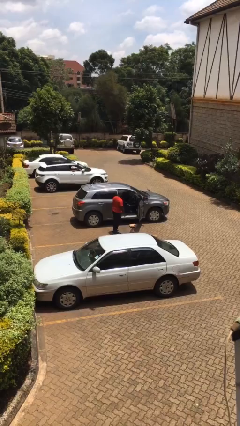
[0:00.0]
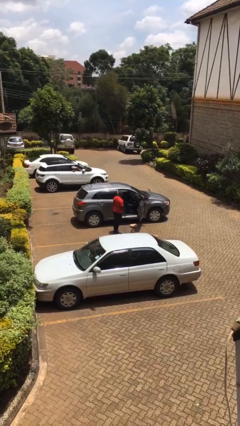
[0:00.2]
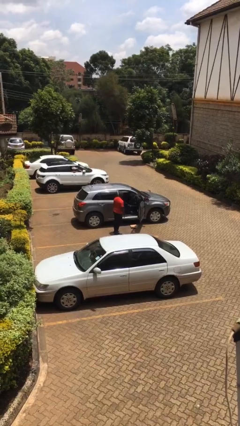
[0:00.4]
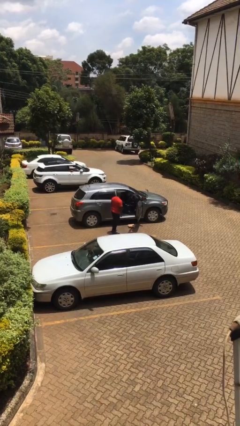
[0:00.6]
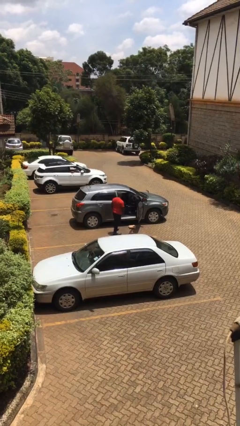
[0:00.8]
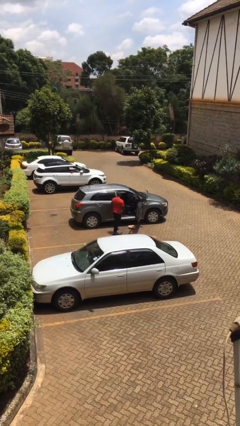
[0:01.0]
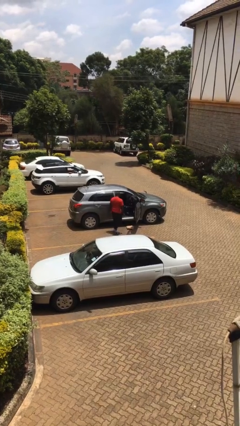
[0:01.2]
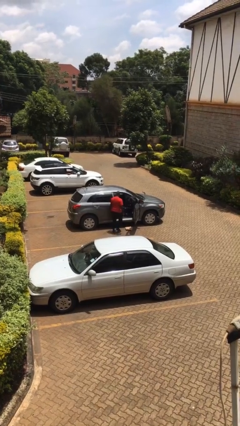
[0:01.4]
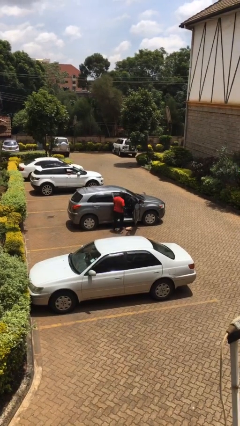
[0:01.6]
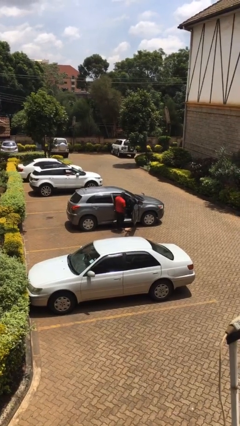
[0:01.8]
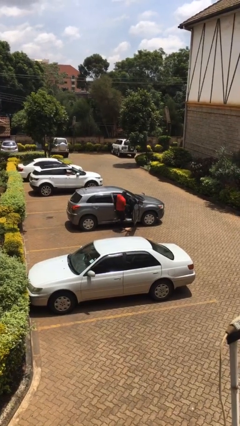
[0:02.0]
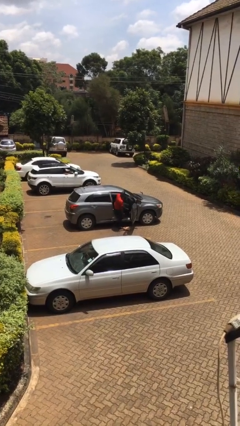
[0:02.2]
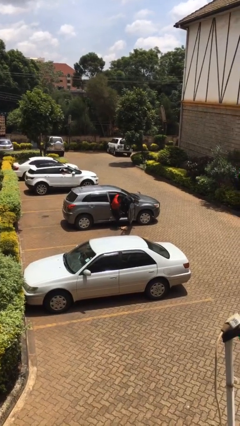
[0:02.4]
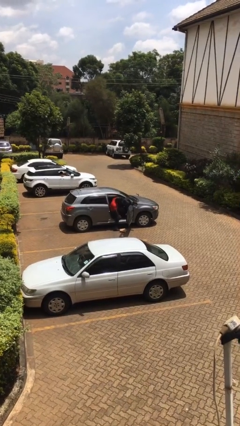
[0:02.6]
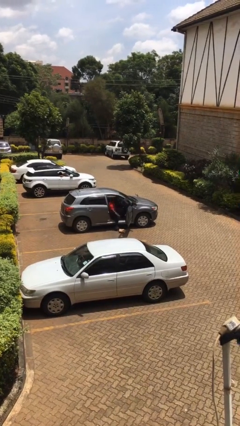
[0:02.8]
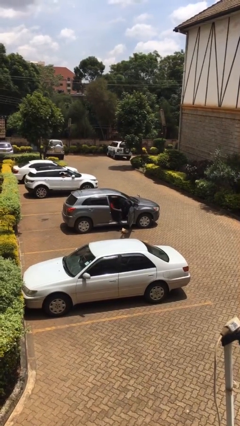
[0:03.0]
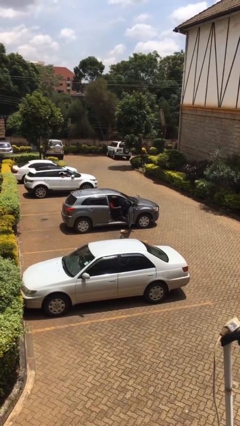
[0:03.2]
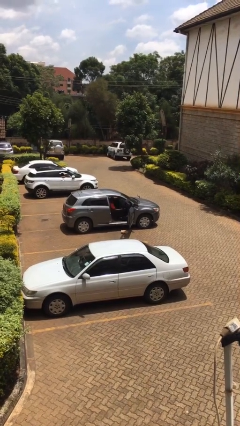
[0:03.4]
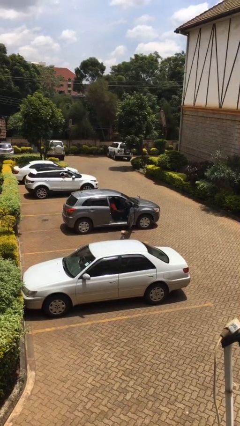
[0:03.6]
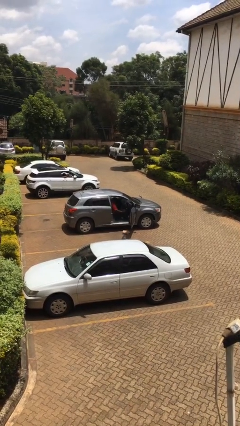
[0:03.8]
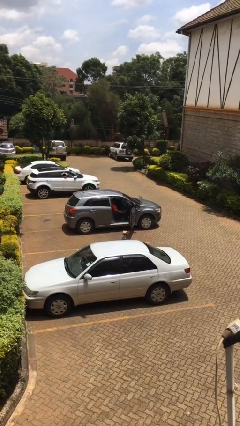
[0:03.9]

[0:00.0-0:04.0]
person enters car

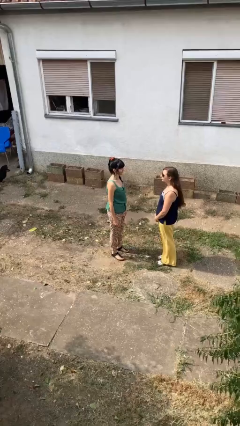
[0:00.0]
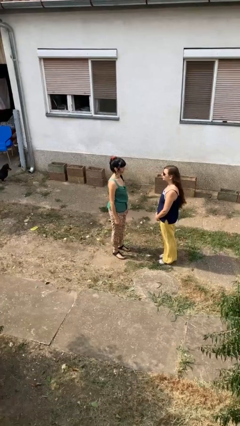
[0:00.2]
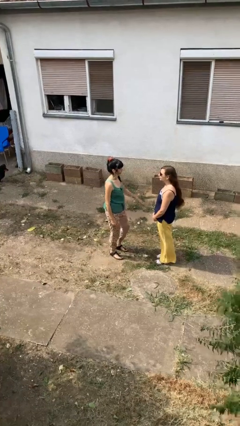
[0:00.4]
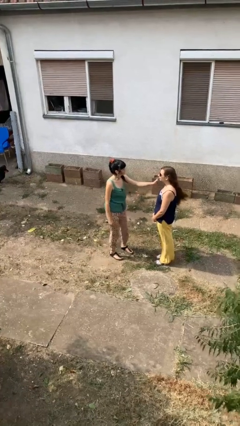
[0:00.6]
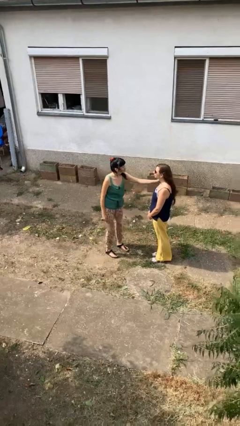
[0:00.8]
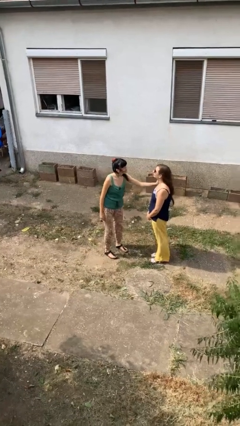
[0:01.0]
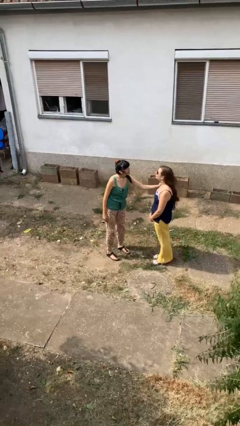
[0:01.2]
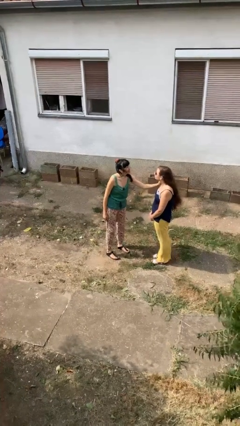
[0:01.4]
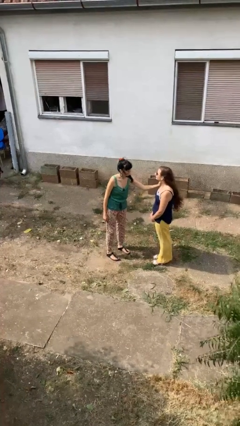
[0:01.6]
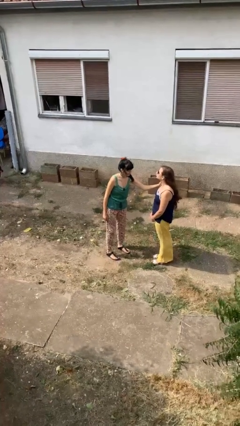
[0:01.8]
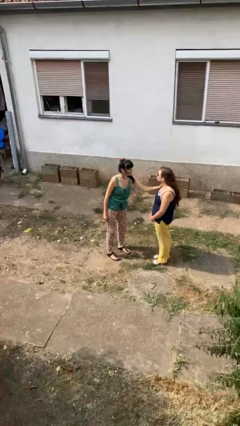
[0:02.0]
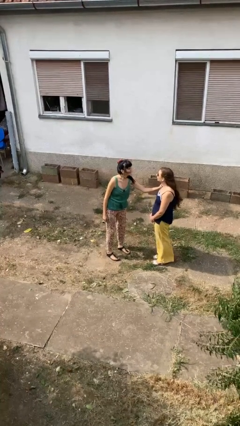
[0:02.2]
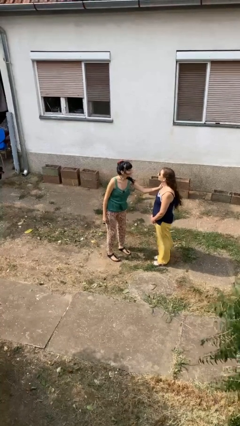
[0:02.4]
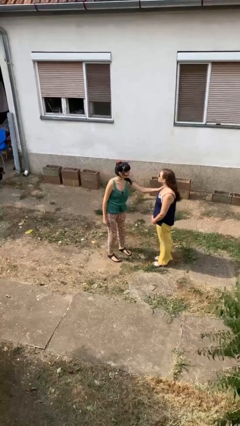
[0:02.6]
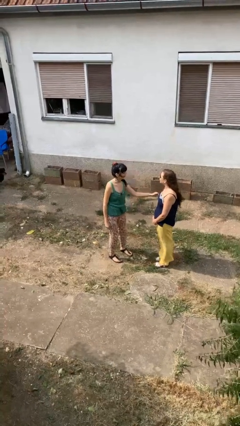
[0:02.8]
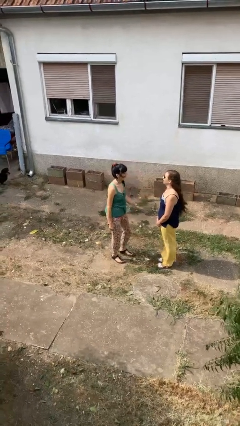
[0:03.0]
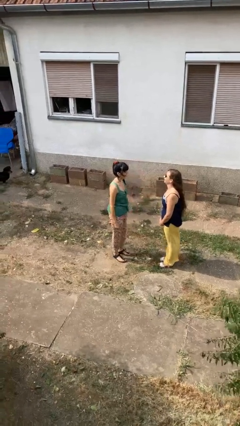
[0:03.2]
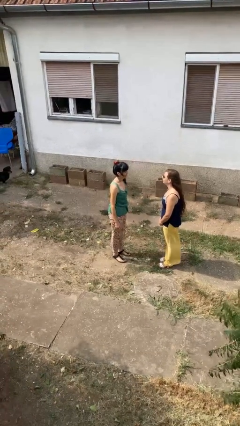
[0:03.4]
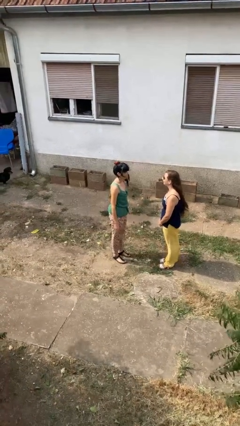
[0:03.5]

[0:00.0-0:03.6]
person pounds shoulders of person

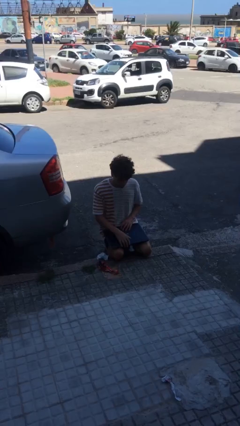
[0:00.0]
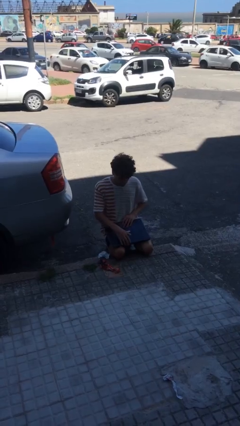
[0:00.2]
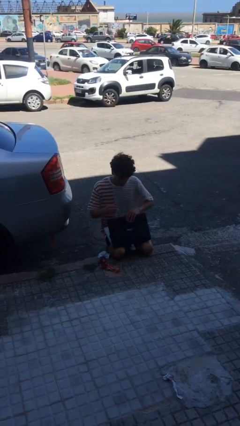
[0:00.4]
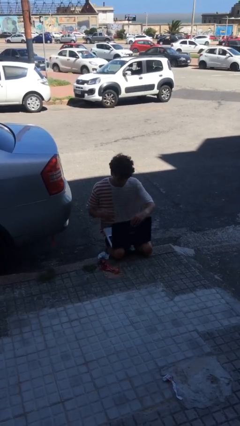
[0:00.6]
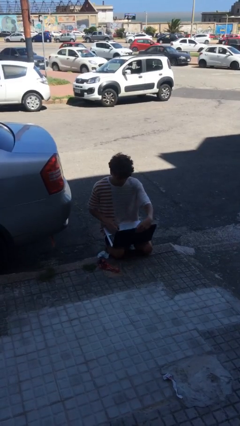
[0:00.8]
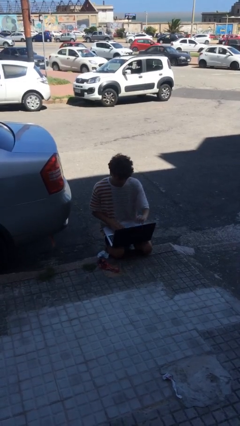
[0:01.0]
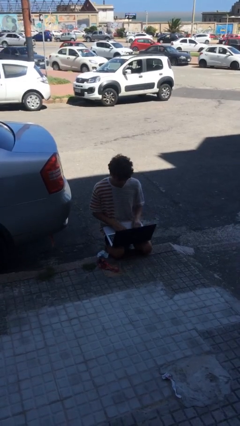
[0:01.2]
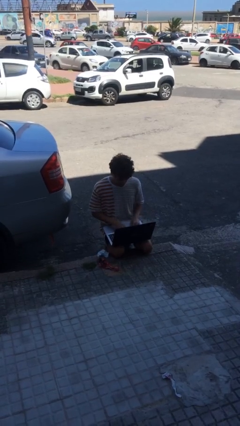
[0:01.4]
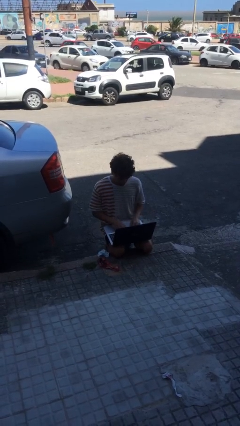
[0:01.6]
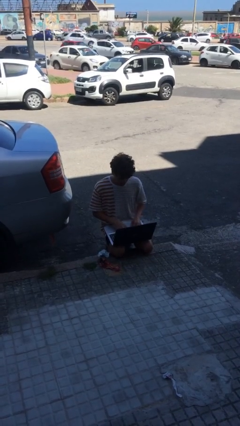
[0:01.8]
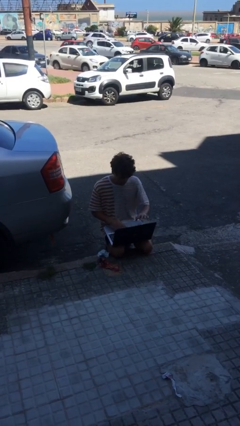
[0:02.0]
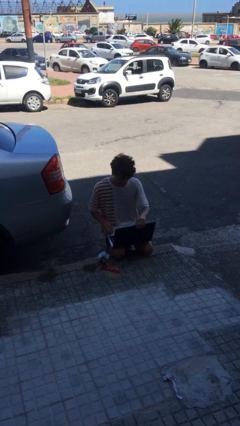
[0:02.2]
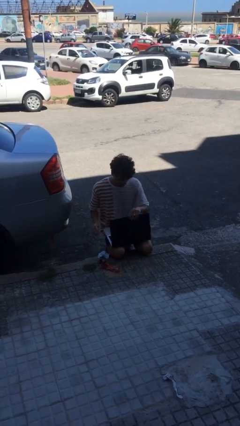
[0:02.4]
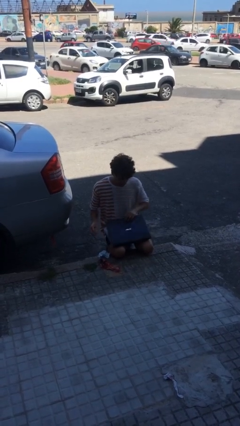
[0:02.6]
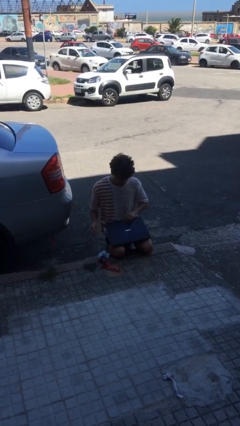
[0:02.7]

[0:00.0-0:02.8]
person interacts with laptop

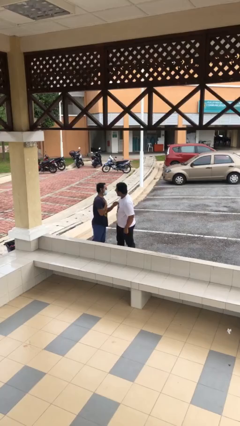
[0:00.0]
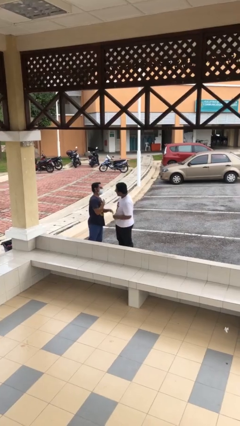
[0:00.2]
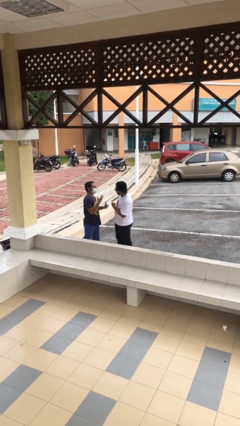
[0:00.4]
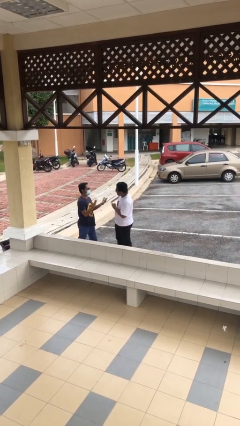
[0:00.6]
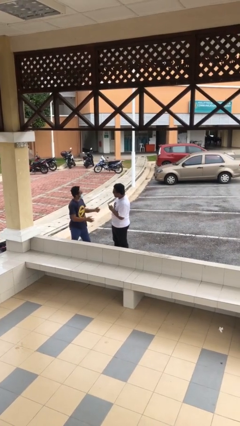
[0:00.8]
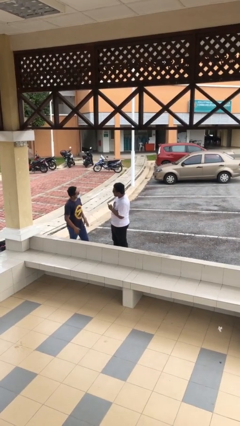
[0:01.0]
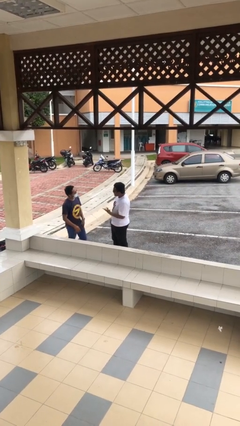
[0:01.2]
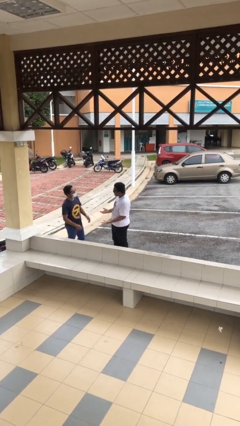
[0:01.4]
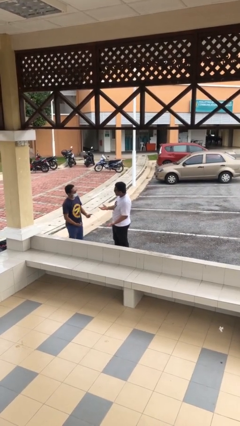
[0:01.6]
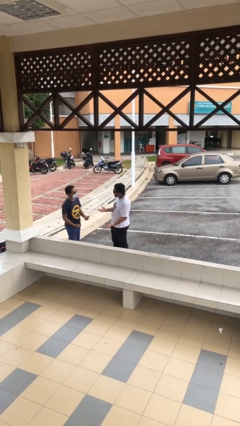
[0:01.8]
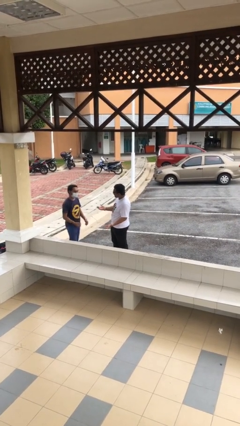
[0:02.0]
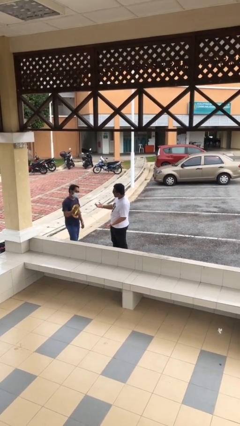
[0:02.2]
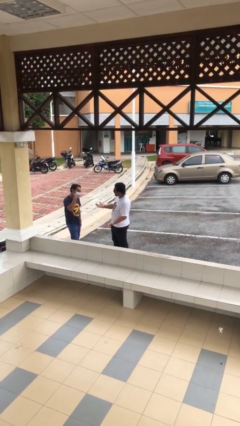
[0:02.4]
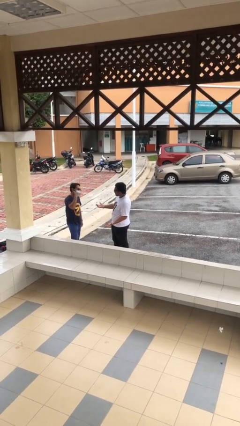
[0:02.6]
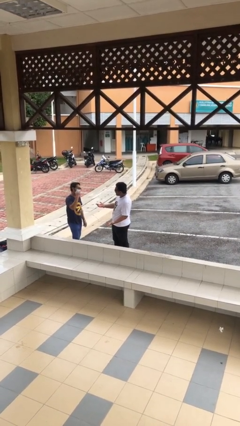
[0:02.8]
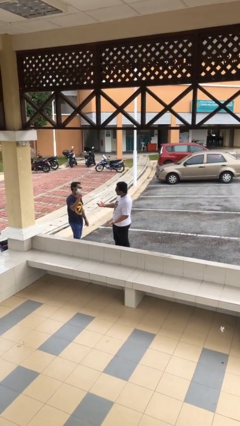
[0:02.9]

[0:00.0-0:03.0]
person talks to person

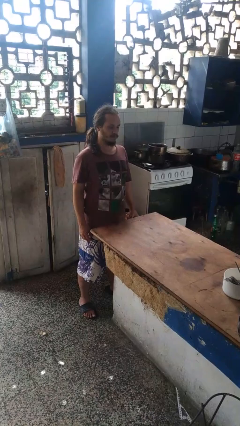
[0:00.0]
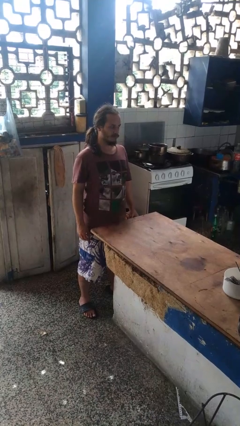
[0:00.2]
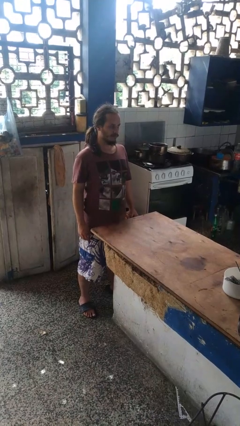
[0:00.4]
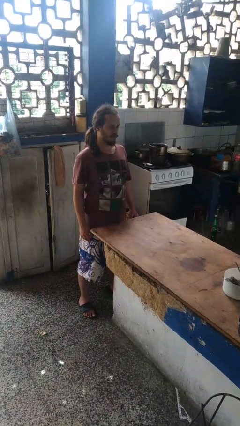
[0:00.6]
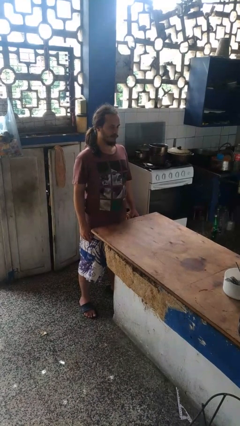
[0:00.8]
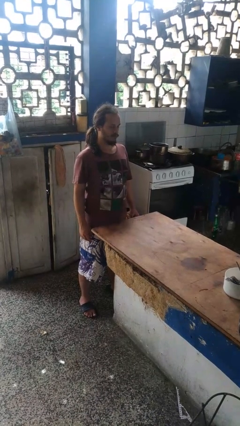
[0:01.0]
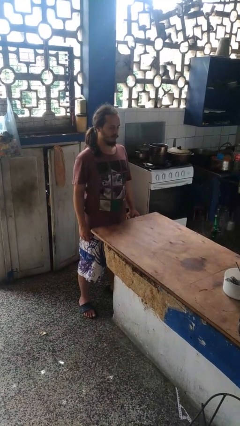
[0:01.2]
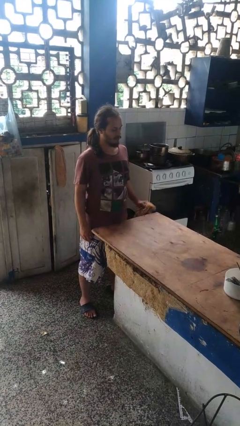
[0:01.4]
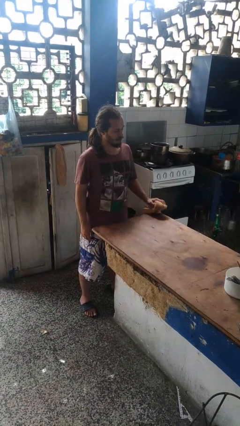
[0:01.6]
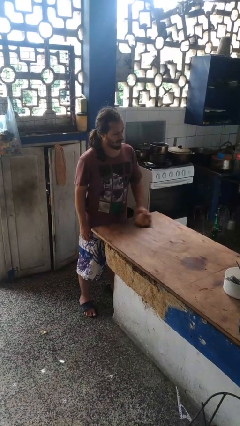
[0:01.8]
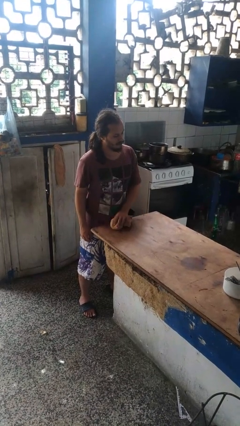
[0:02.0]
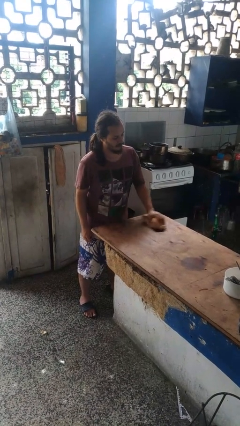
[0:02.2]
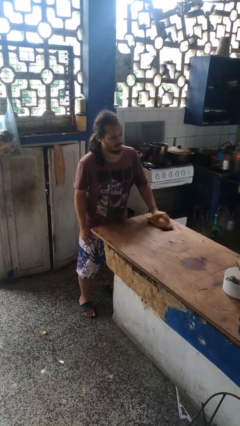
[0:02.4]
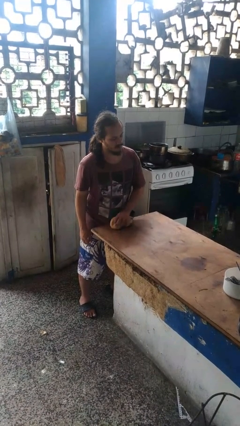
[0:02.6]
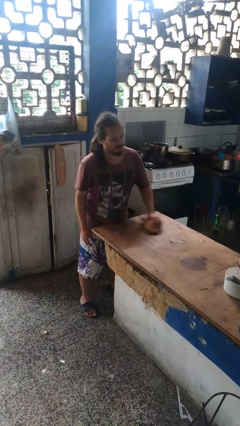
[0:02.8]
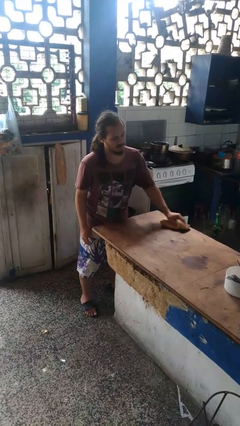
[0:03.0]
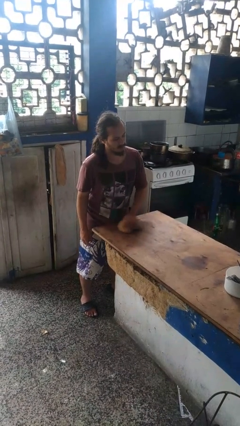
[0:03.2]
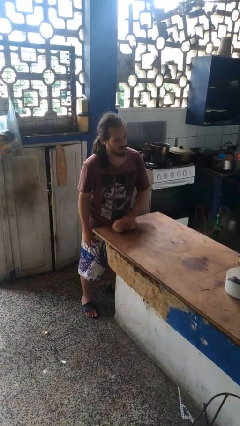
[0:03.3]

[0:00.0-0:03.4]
person cleans table with rag

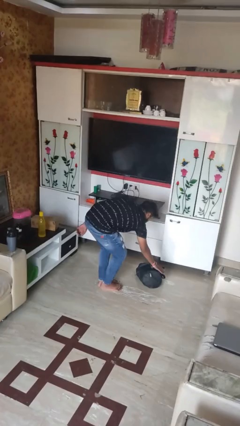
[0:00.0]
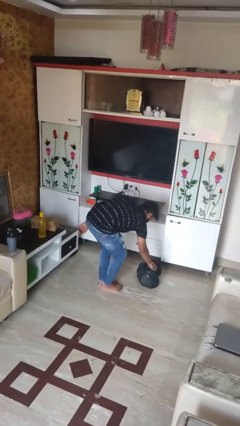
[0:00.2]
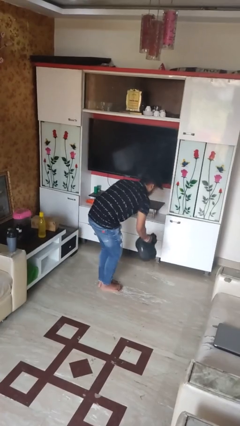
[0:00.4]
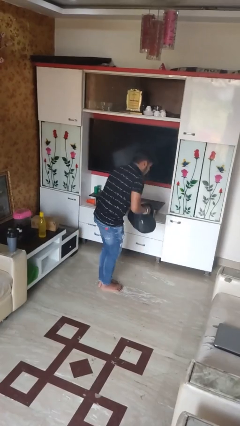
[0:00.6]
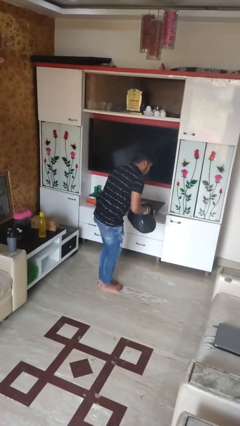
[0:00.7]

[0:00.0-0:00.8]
person picks up object from floor
